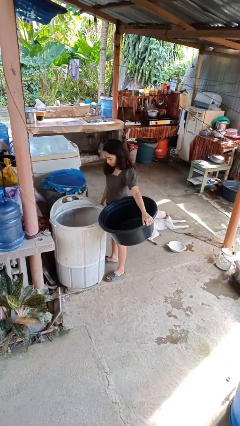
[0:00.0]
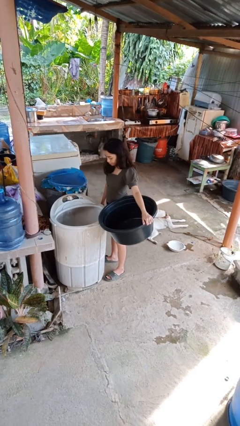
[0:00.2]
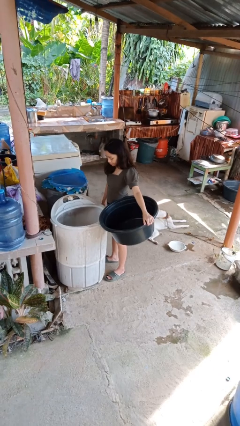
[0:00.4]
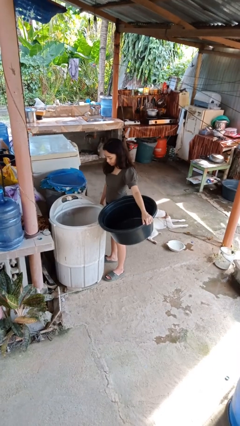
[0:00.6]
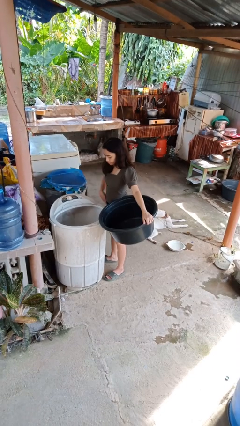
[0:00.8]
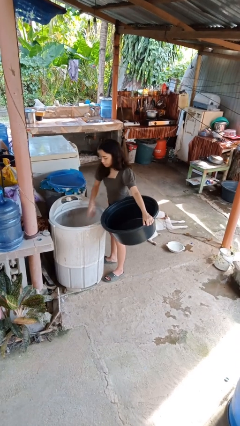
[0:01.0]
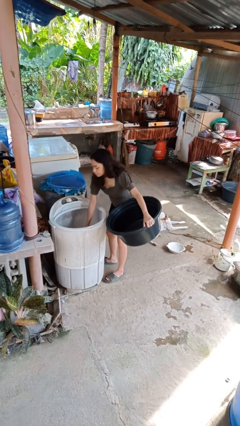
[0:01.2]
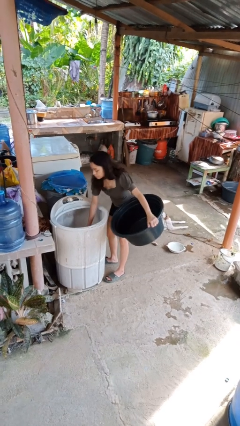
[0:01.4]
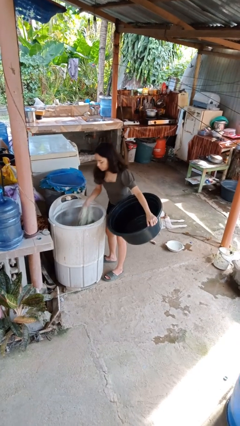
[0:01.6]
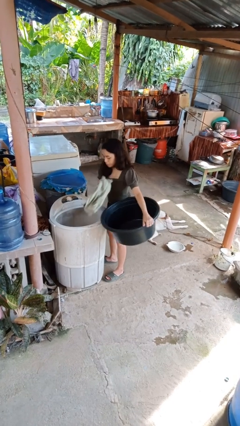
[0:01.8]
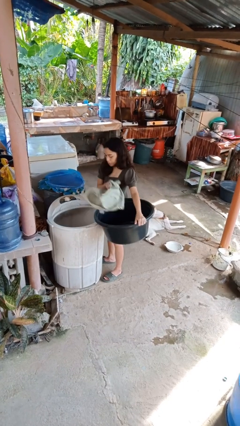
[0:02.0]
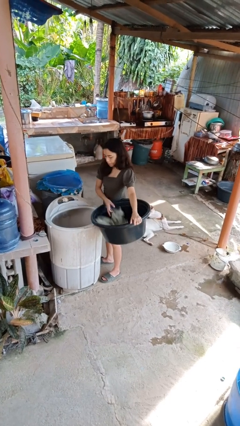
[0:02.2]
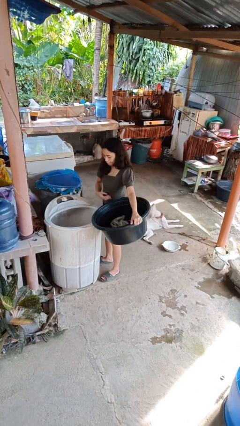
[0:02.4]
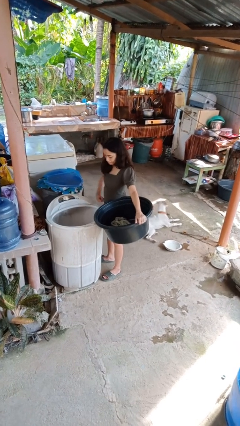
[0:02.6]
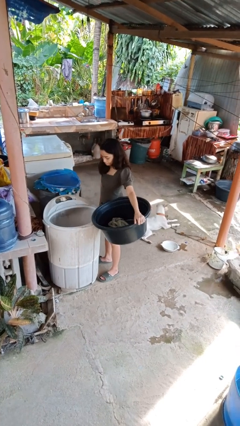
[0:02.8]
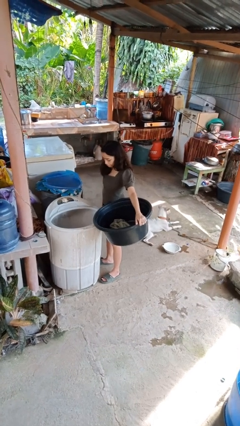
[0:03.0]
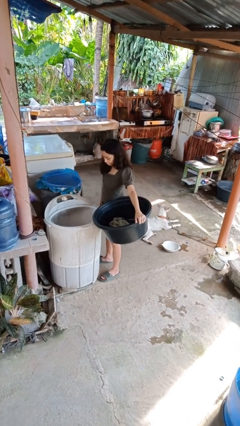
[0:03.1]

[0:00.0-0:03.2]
person unloads clotheswasher

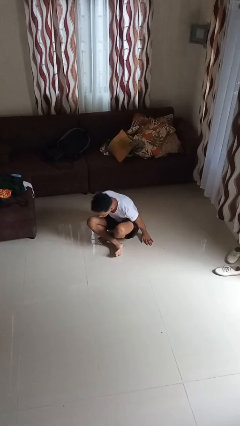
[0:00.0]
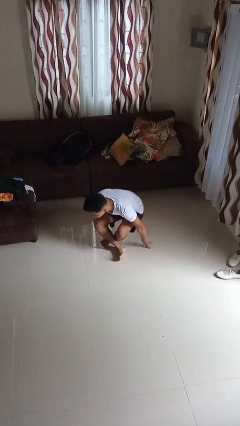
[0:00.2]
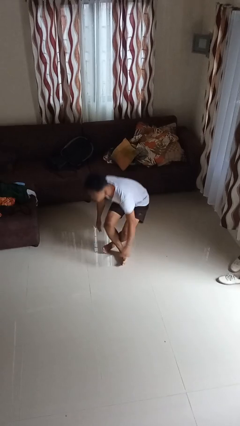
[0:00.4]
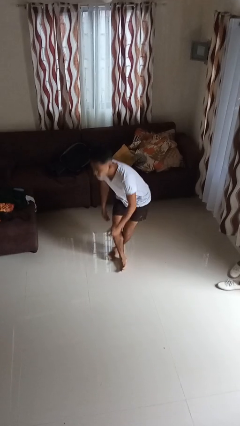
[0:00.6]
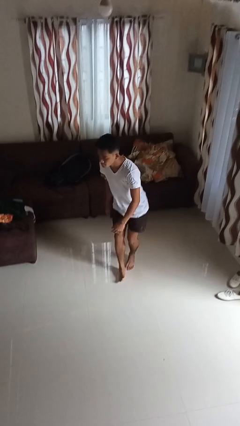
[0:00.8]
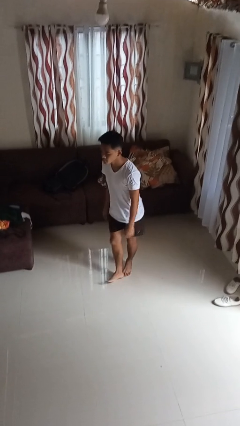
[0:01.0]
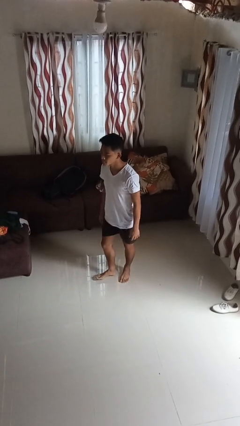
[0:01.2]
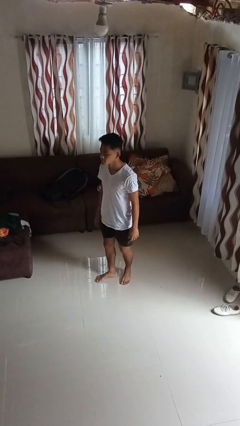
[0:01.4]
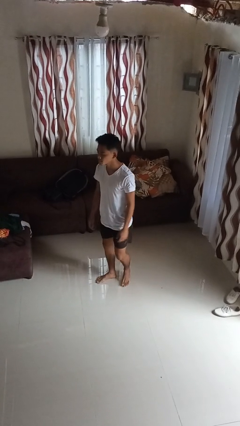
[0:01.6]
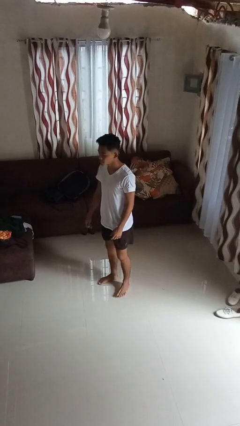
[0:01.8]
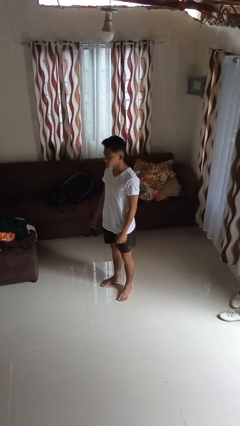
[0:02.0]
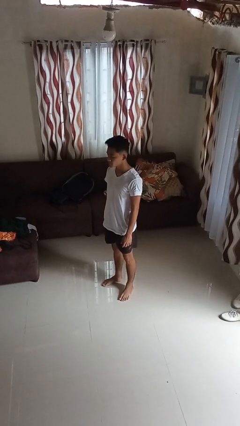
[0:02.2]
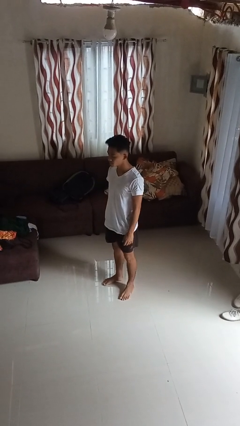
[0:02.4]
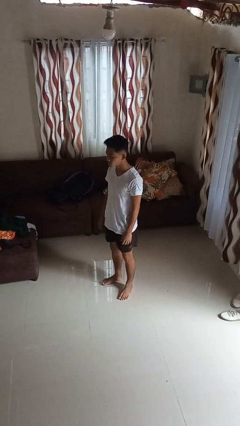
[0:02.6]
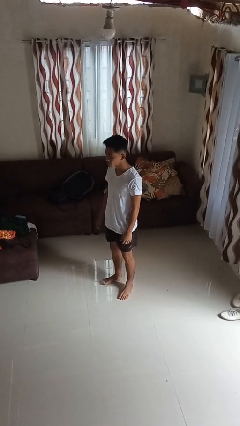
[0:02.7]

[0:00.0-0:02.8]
person stands up from floor

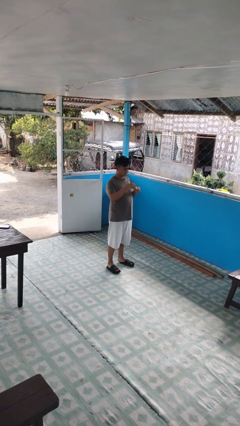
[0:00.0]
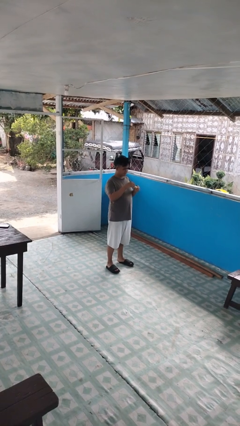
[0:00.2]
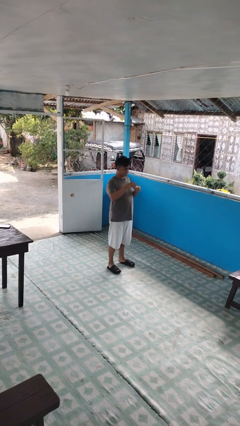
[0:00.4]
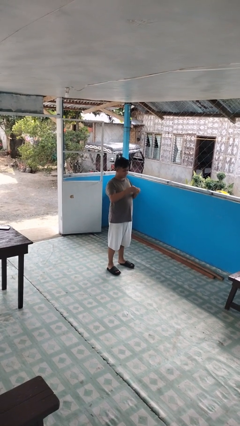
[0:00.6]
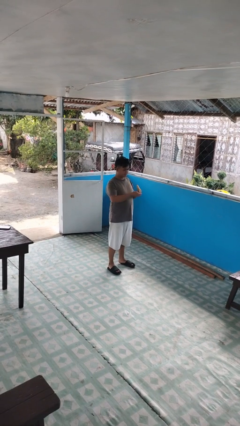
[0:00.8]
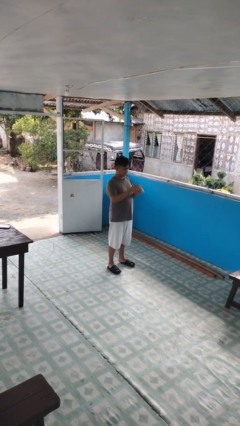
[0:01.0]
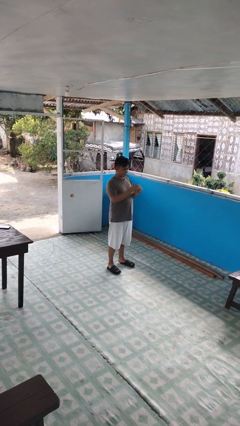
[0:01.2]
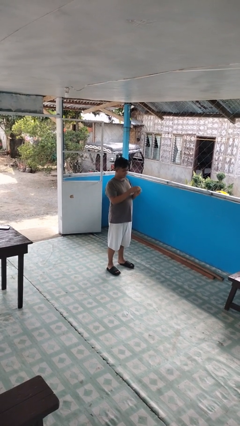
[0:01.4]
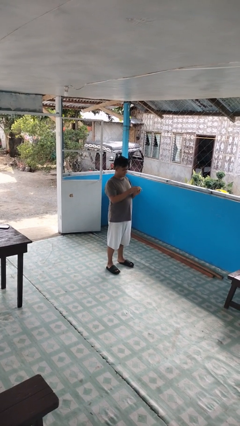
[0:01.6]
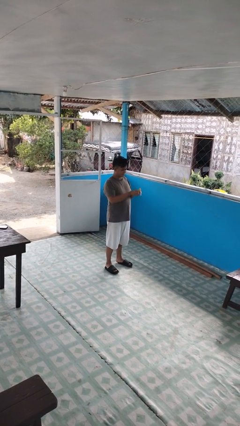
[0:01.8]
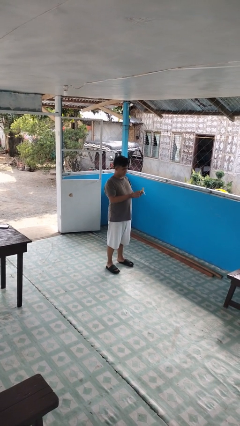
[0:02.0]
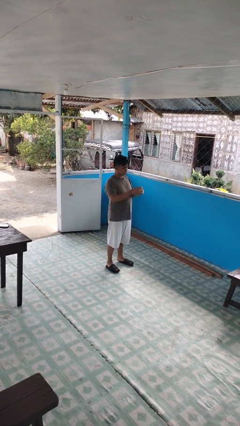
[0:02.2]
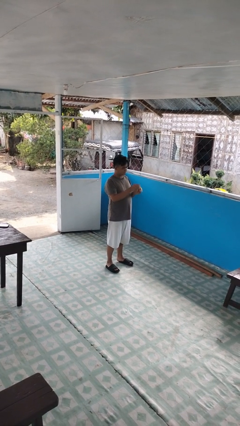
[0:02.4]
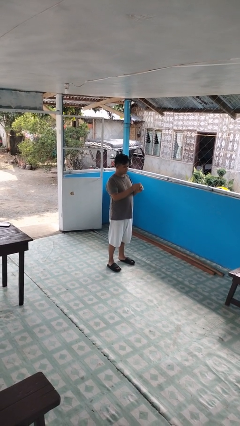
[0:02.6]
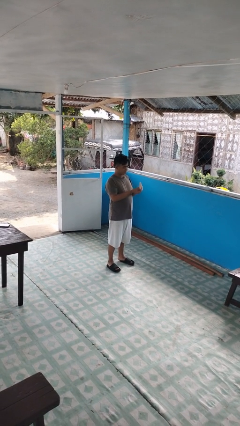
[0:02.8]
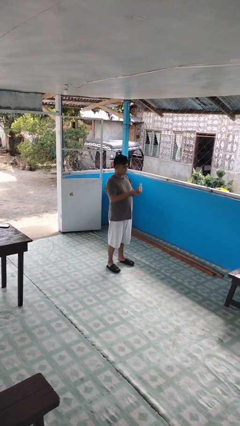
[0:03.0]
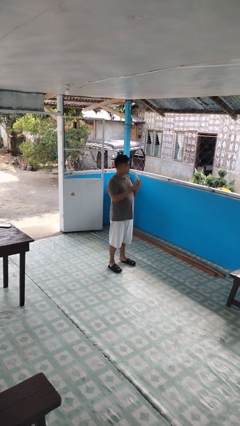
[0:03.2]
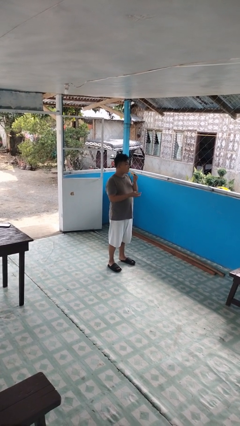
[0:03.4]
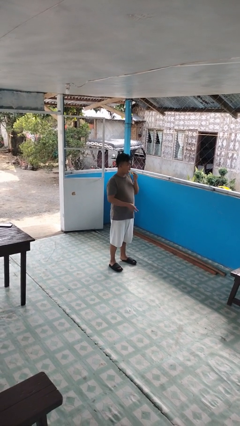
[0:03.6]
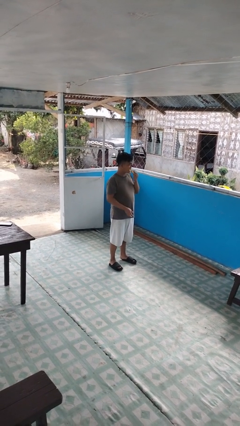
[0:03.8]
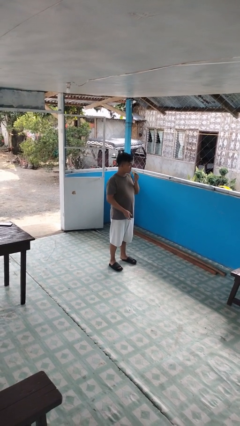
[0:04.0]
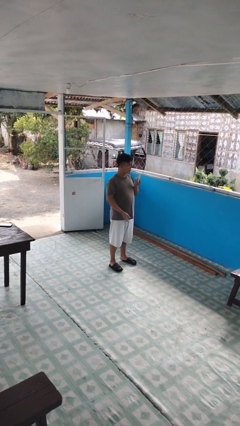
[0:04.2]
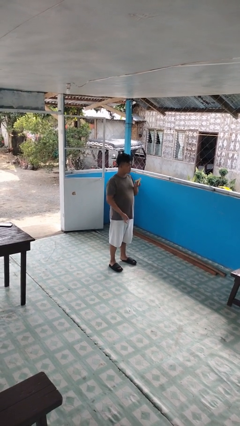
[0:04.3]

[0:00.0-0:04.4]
person eats banana

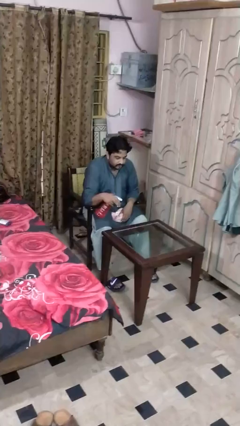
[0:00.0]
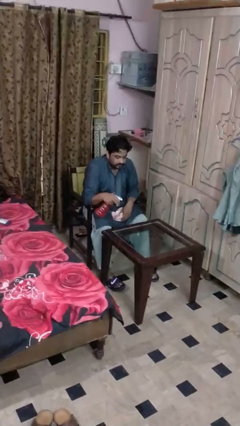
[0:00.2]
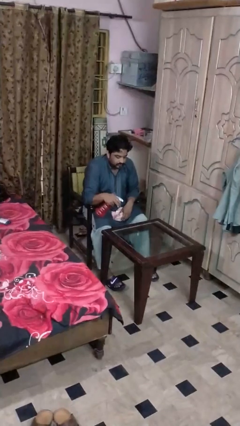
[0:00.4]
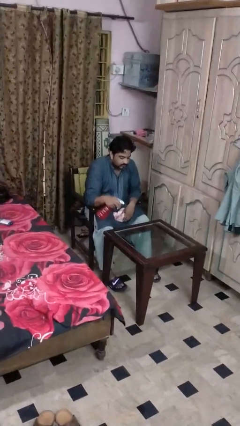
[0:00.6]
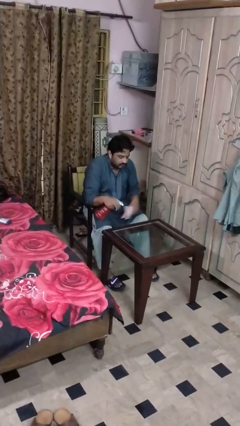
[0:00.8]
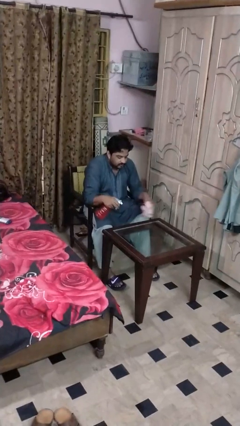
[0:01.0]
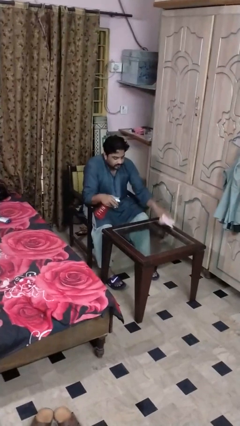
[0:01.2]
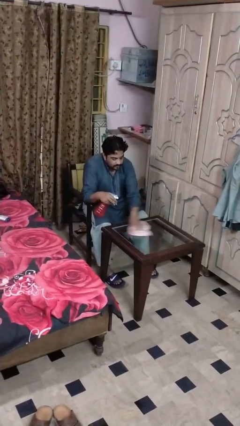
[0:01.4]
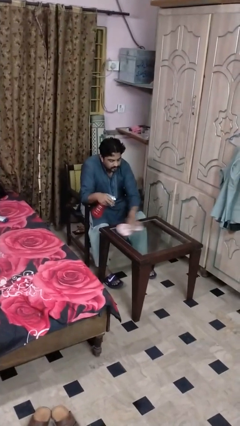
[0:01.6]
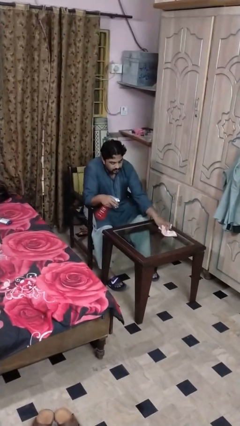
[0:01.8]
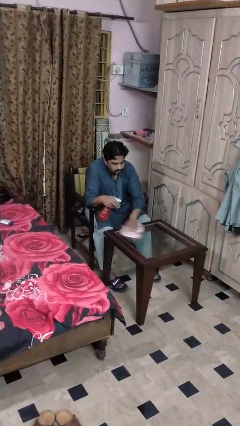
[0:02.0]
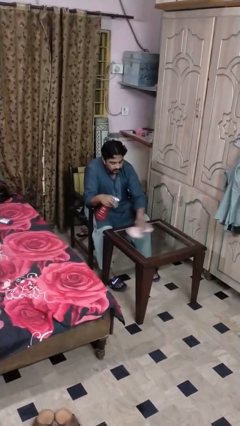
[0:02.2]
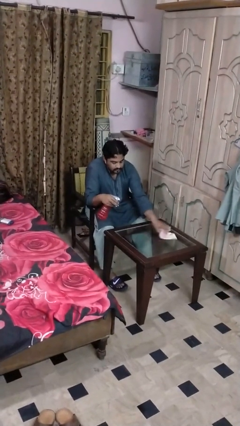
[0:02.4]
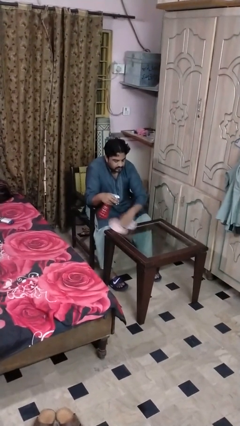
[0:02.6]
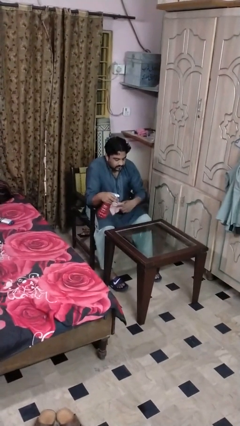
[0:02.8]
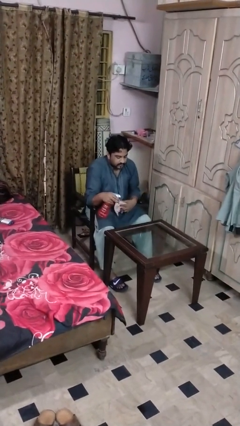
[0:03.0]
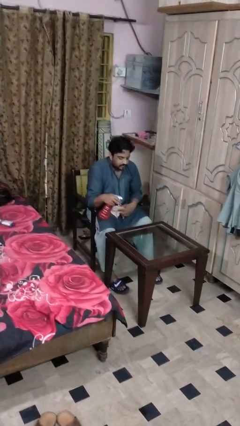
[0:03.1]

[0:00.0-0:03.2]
person cleans table with rag

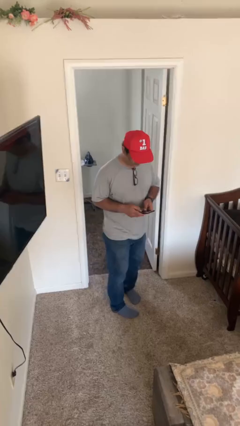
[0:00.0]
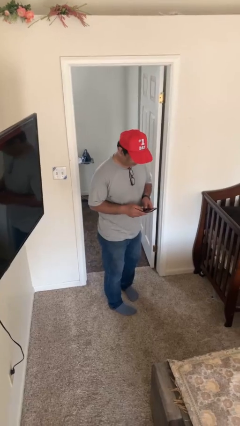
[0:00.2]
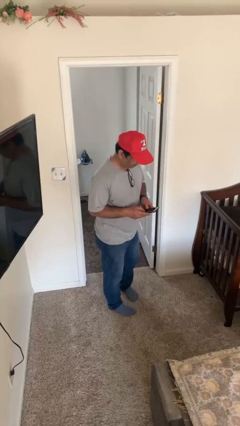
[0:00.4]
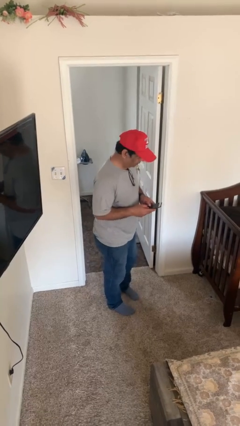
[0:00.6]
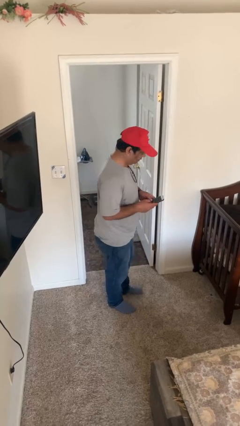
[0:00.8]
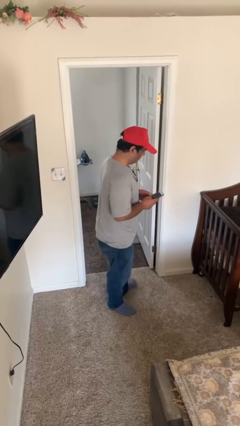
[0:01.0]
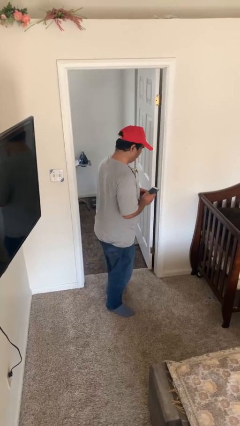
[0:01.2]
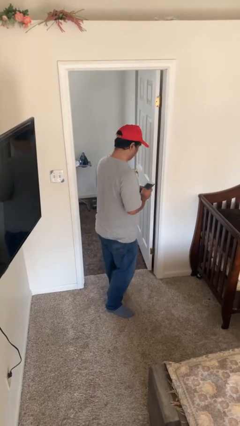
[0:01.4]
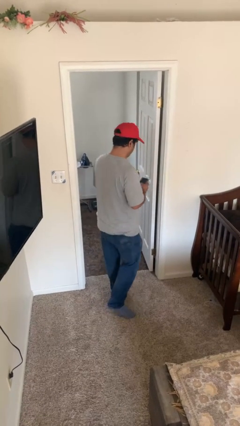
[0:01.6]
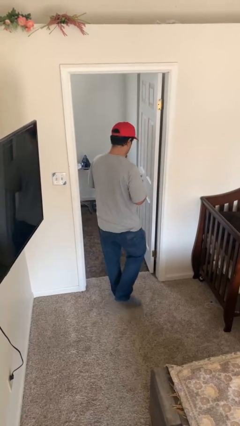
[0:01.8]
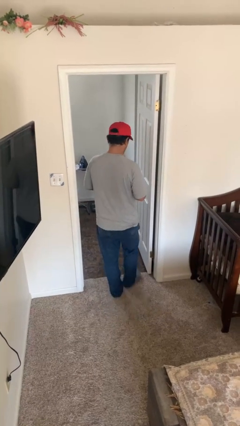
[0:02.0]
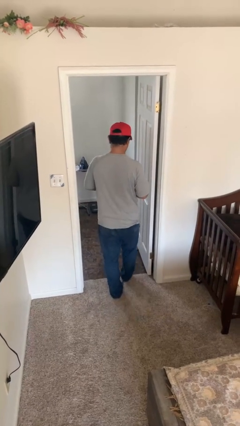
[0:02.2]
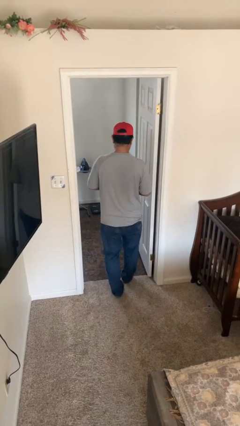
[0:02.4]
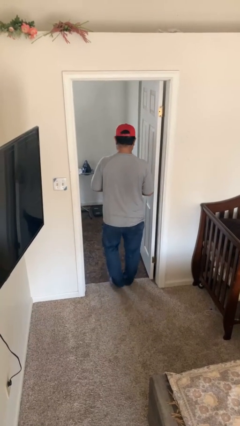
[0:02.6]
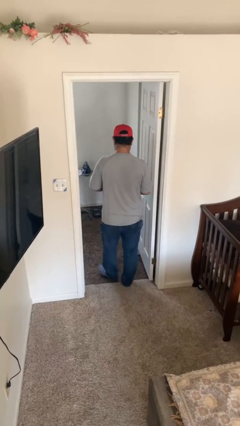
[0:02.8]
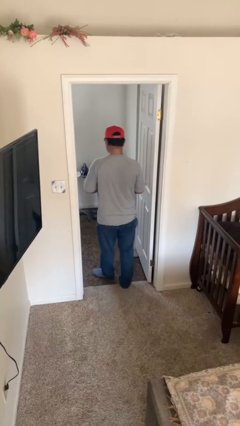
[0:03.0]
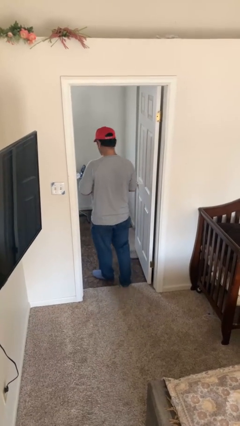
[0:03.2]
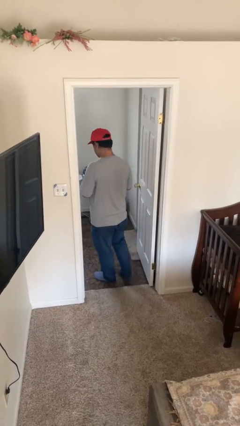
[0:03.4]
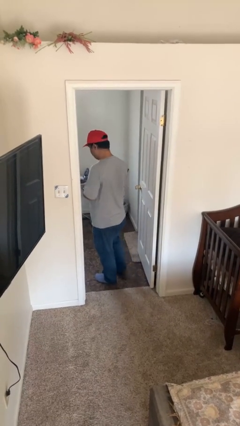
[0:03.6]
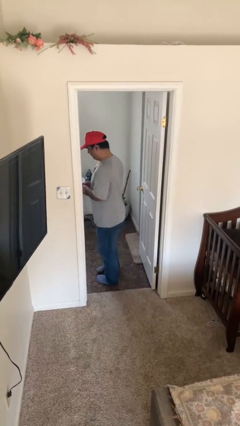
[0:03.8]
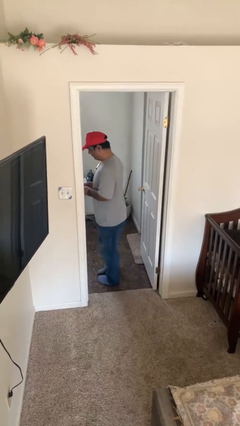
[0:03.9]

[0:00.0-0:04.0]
person exits scene through structure
